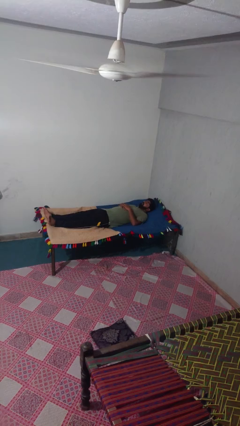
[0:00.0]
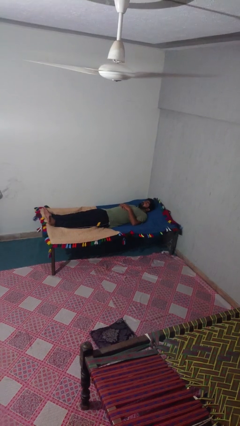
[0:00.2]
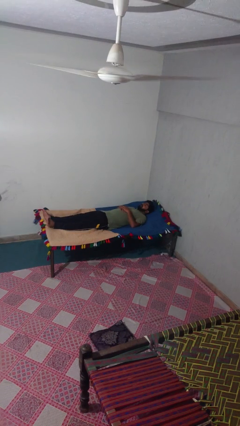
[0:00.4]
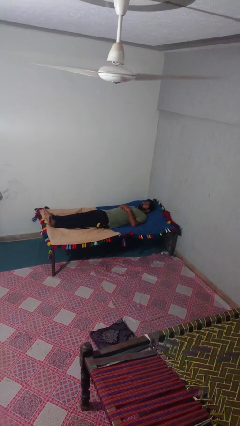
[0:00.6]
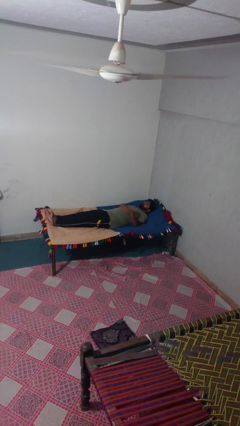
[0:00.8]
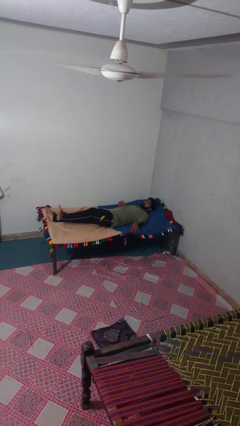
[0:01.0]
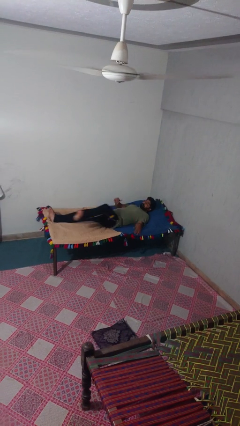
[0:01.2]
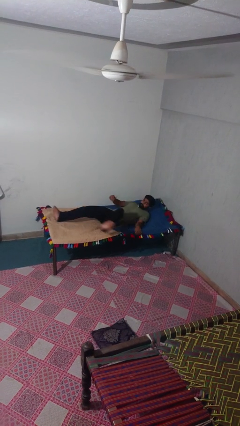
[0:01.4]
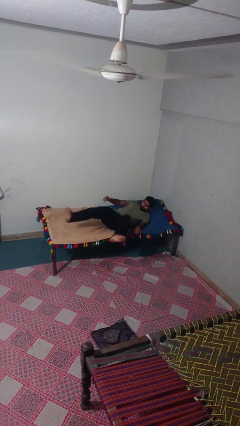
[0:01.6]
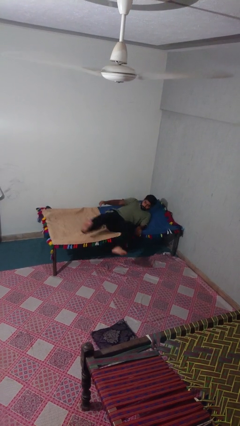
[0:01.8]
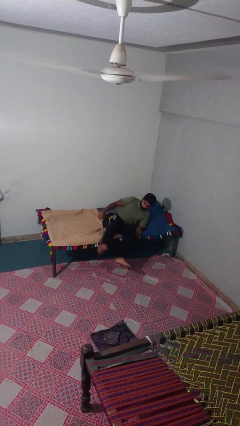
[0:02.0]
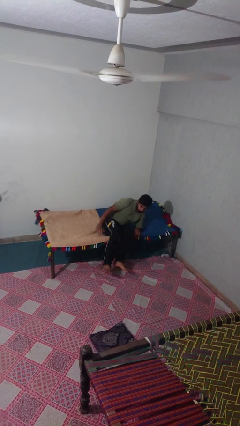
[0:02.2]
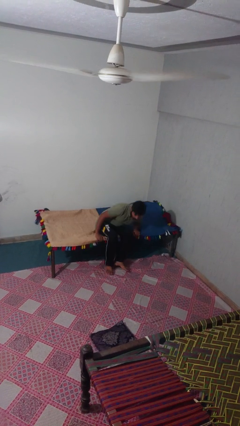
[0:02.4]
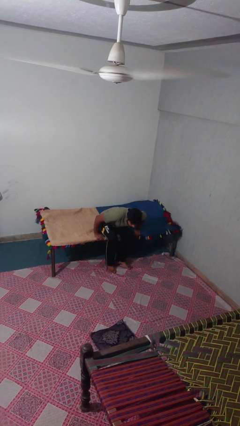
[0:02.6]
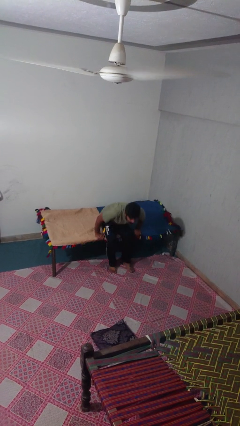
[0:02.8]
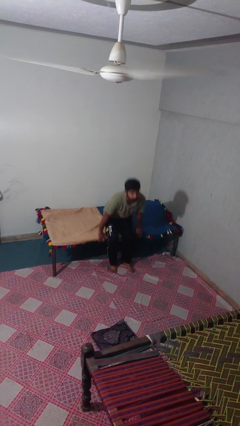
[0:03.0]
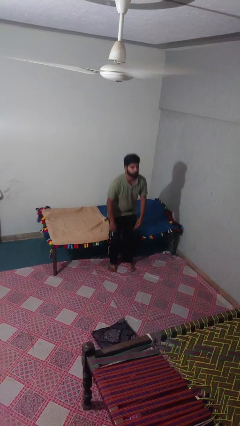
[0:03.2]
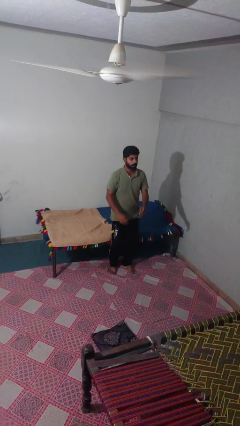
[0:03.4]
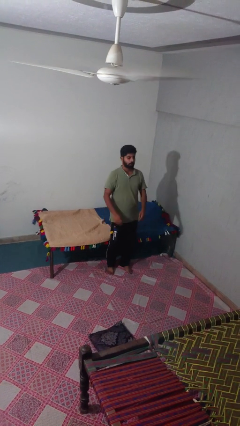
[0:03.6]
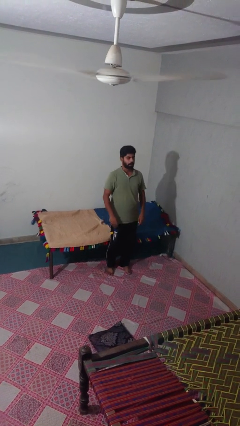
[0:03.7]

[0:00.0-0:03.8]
person stands up

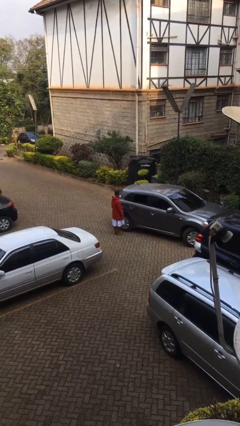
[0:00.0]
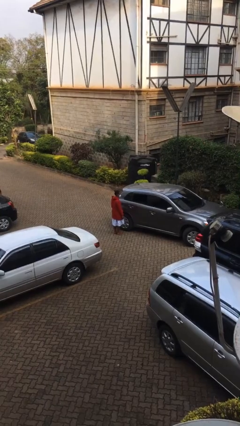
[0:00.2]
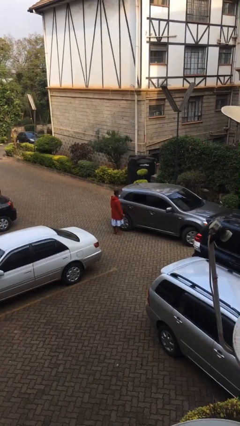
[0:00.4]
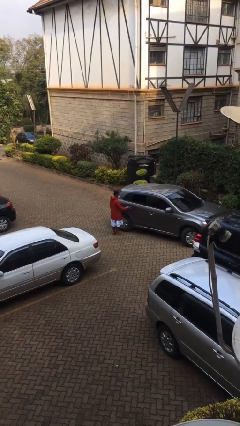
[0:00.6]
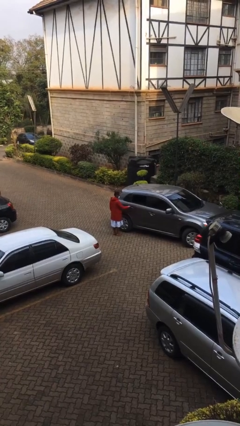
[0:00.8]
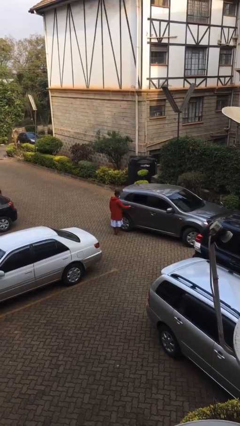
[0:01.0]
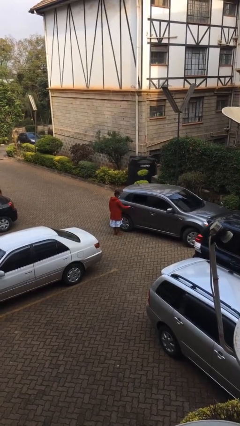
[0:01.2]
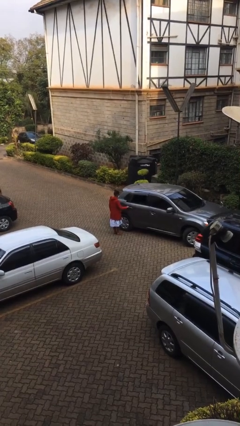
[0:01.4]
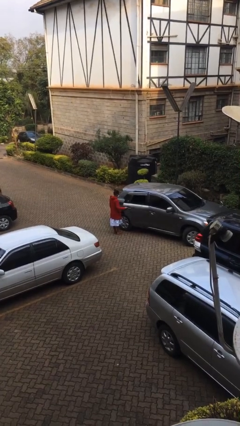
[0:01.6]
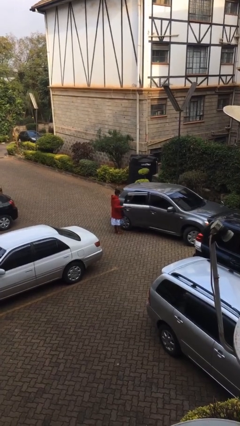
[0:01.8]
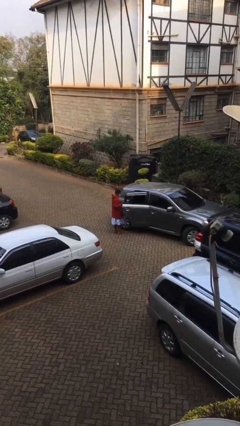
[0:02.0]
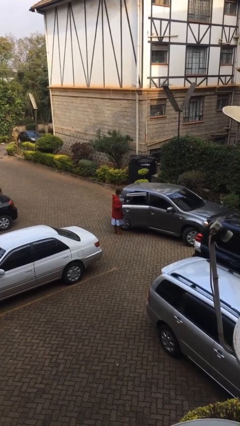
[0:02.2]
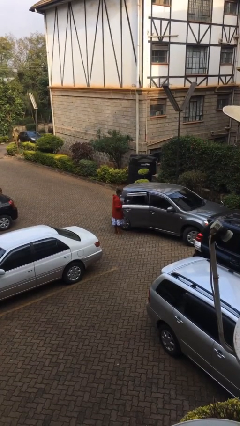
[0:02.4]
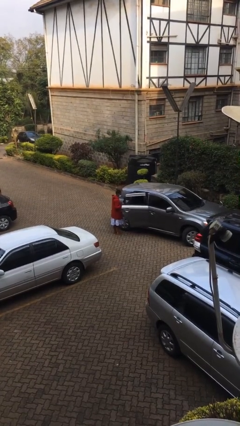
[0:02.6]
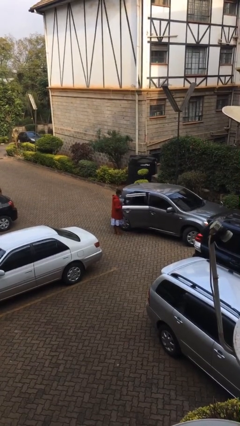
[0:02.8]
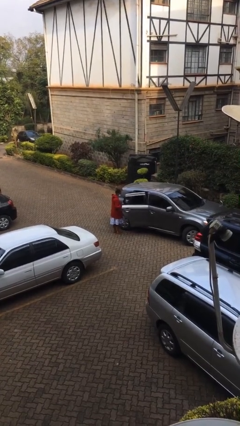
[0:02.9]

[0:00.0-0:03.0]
person opens car door

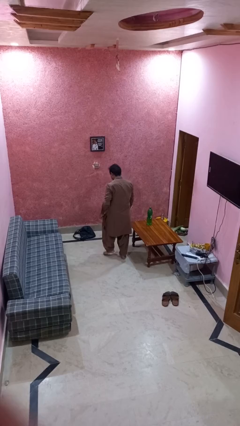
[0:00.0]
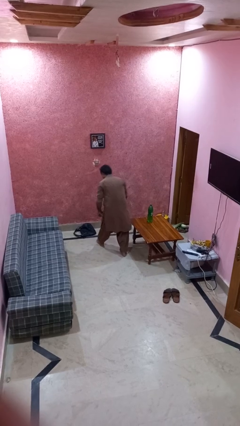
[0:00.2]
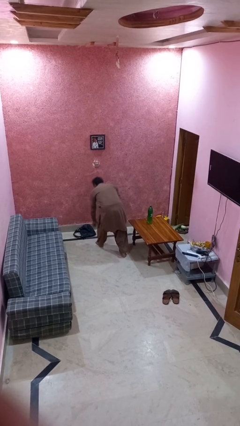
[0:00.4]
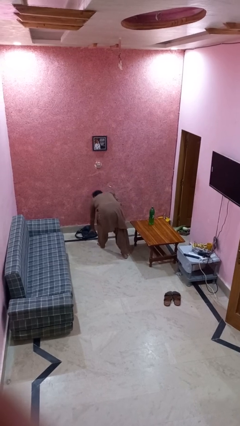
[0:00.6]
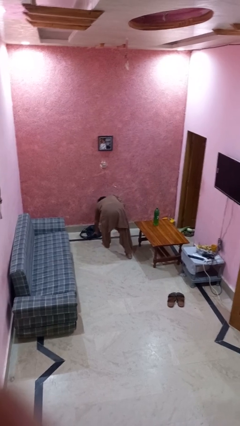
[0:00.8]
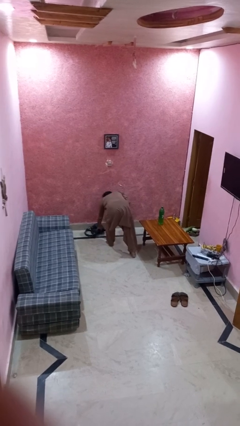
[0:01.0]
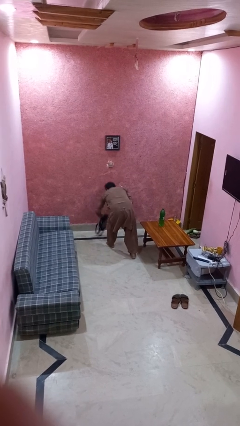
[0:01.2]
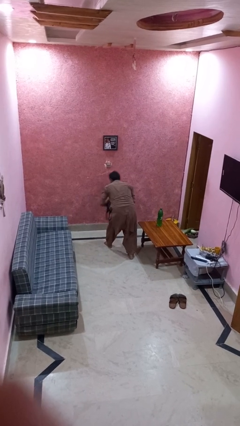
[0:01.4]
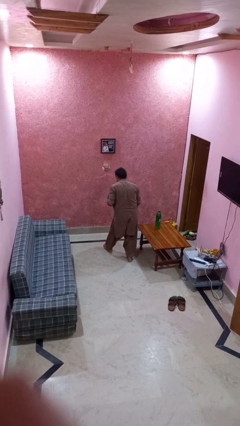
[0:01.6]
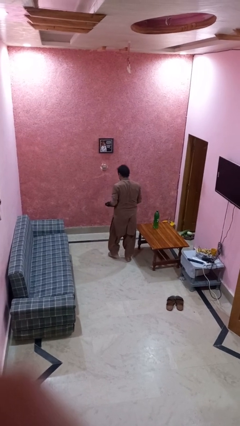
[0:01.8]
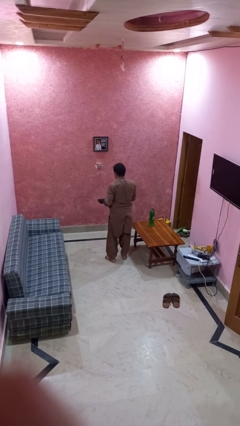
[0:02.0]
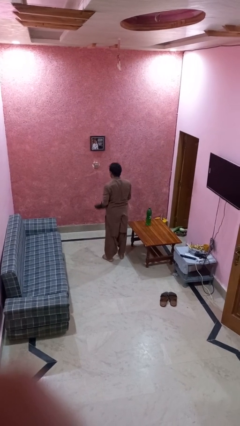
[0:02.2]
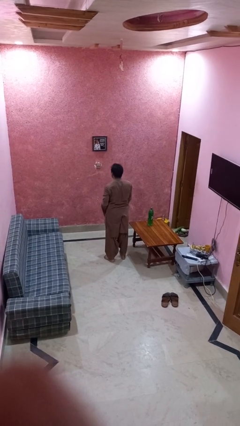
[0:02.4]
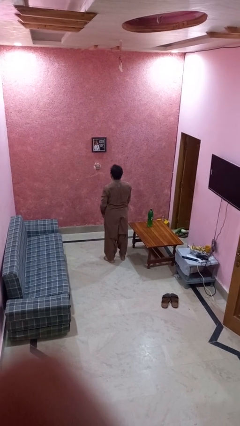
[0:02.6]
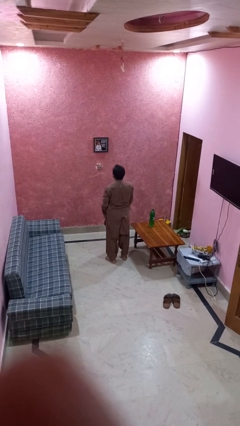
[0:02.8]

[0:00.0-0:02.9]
person picks up object from floor

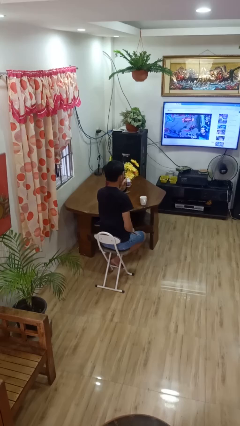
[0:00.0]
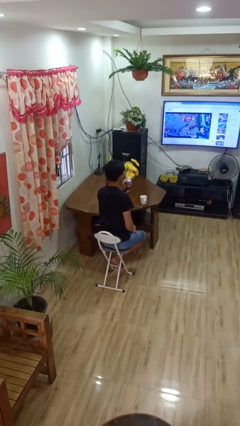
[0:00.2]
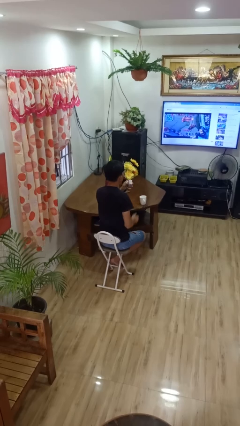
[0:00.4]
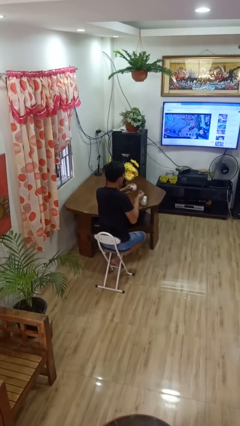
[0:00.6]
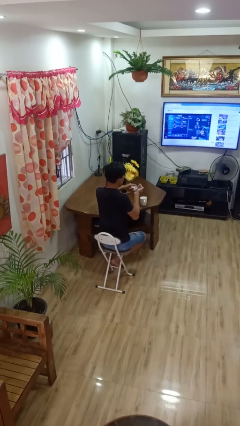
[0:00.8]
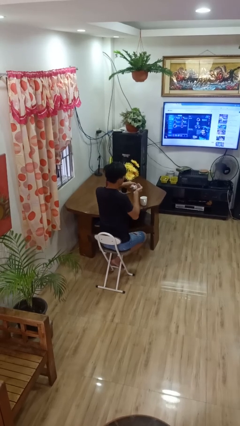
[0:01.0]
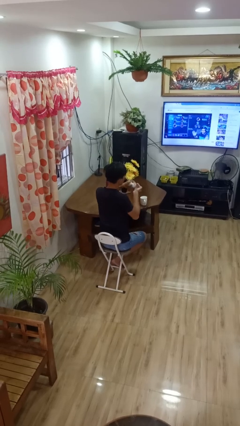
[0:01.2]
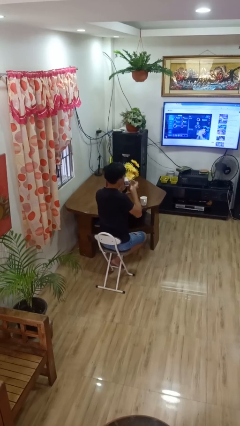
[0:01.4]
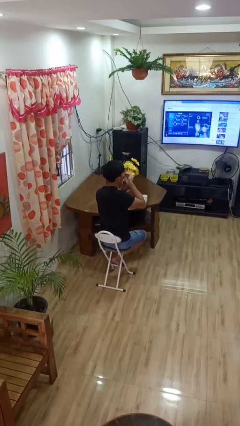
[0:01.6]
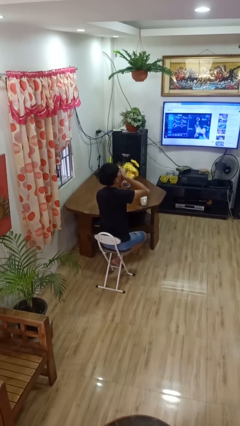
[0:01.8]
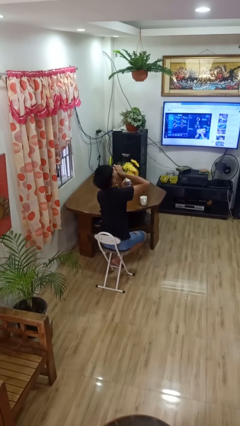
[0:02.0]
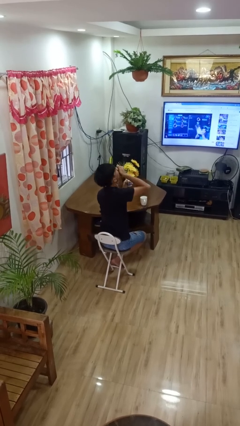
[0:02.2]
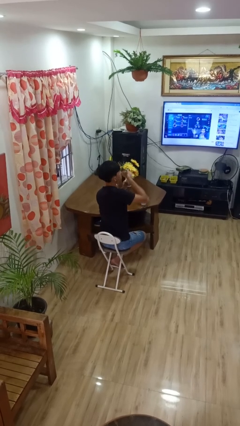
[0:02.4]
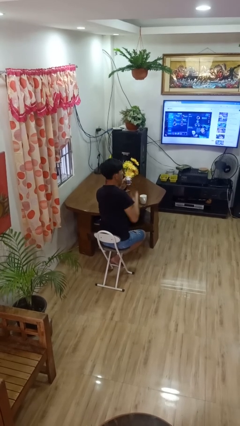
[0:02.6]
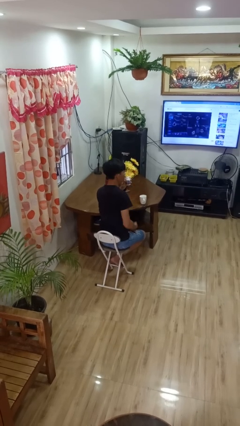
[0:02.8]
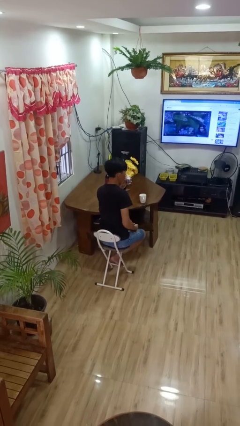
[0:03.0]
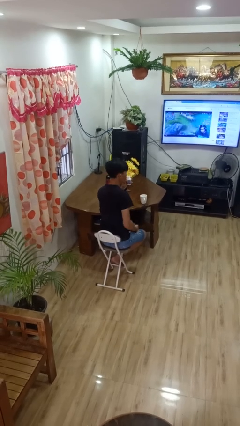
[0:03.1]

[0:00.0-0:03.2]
person takes medicine pills

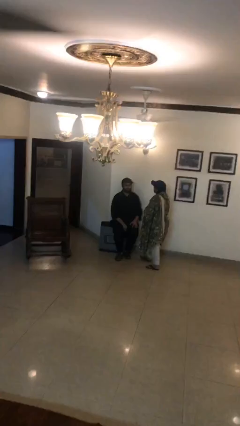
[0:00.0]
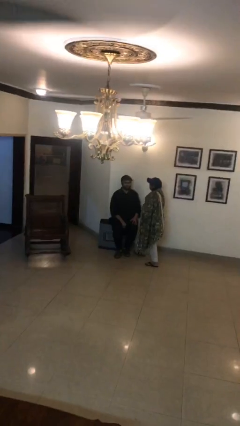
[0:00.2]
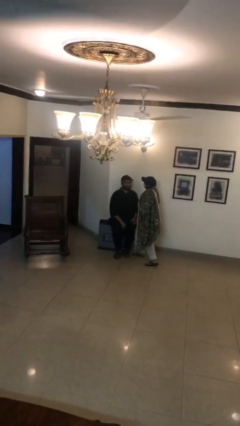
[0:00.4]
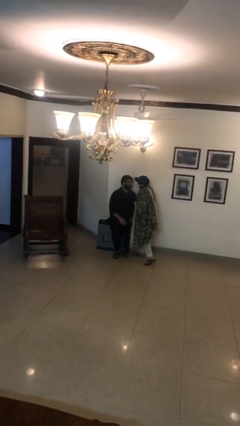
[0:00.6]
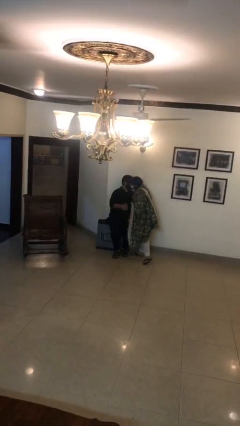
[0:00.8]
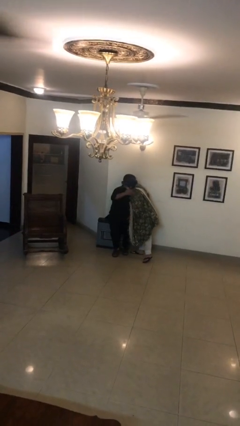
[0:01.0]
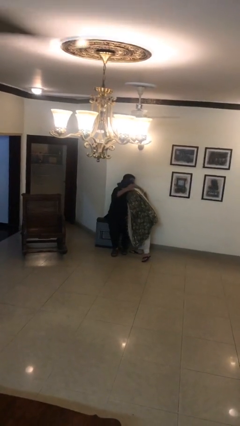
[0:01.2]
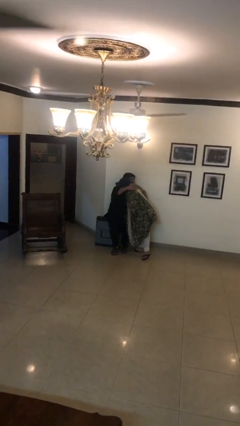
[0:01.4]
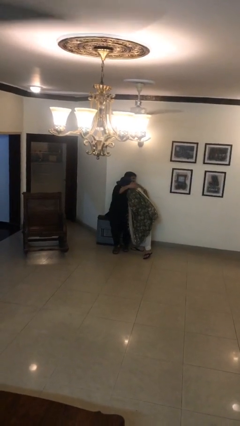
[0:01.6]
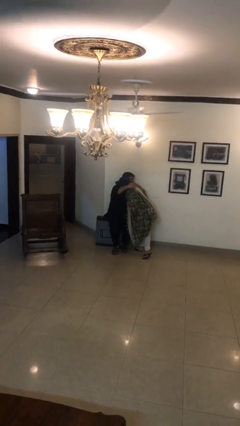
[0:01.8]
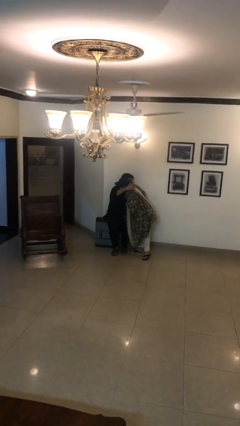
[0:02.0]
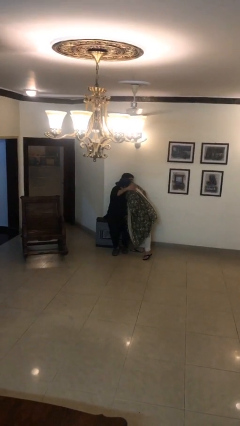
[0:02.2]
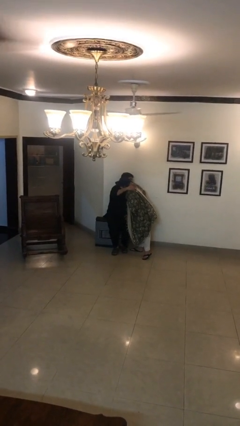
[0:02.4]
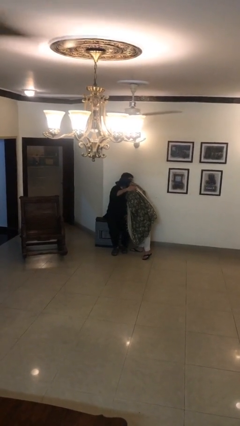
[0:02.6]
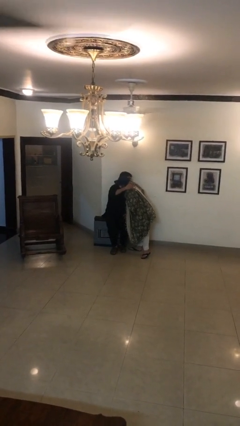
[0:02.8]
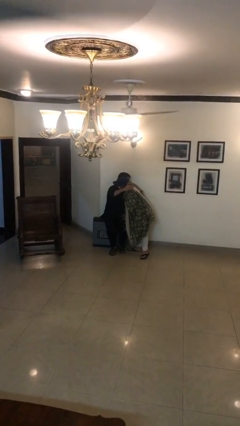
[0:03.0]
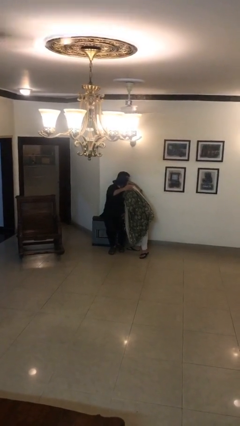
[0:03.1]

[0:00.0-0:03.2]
person embraces person

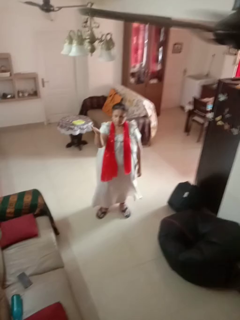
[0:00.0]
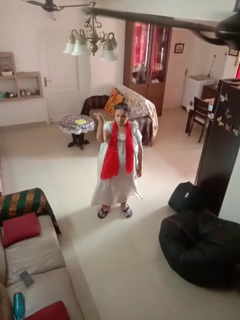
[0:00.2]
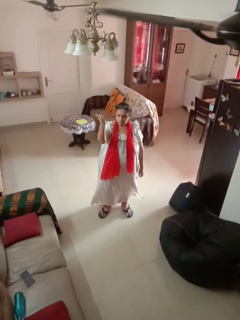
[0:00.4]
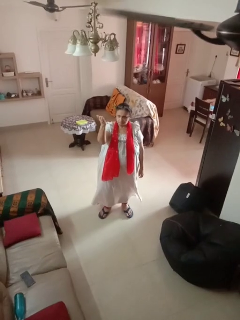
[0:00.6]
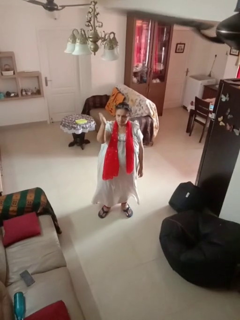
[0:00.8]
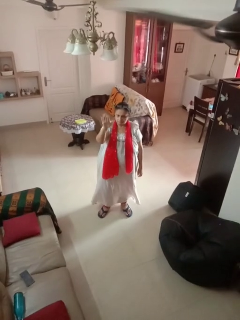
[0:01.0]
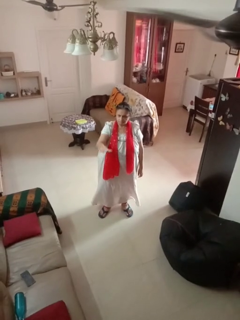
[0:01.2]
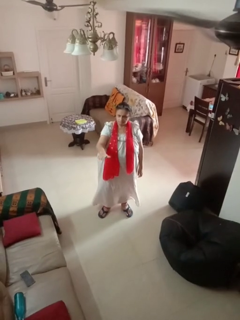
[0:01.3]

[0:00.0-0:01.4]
person gestures swipe up
